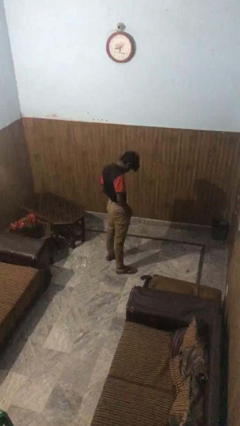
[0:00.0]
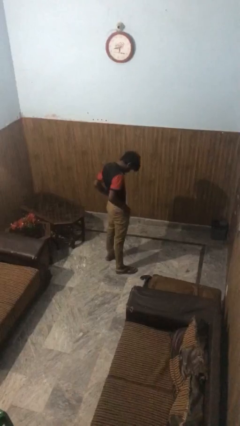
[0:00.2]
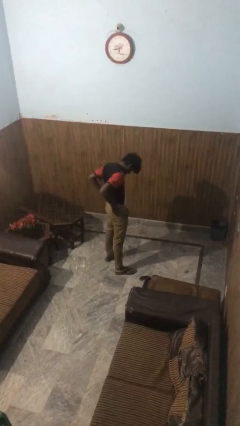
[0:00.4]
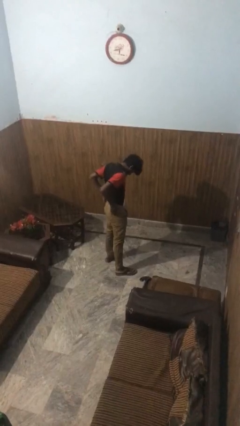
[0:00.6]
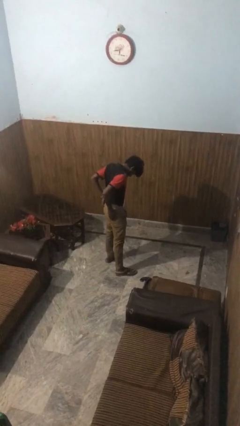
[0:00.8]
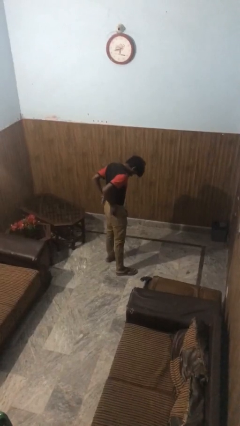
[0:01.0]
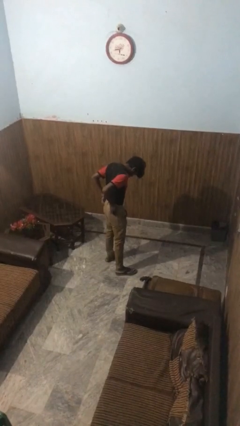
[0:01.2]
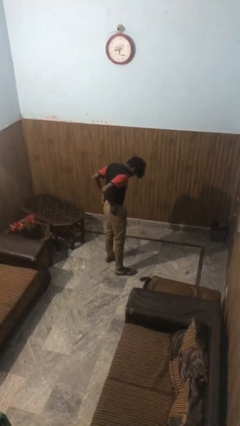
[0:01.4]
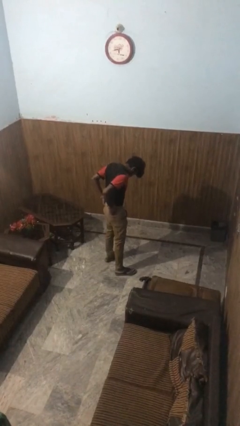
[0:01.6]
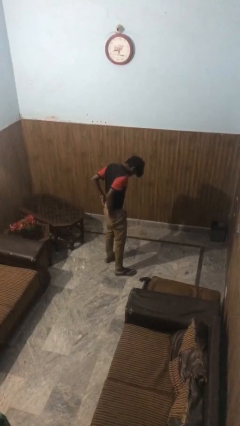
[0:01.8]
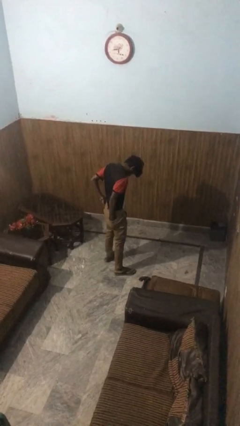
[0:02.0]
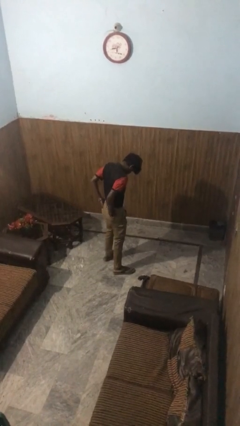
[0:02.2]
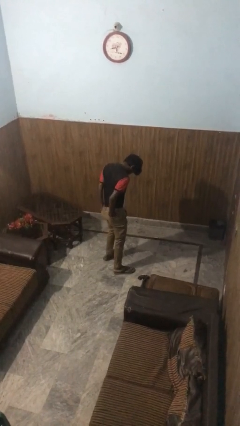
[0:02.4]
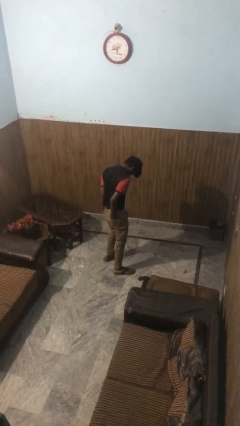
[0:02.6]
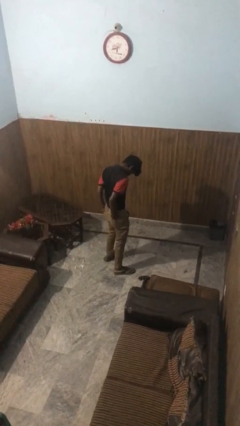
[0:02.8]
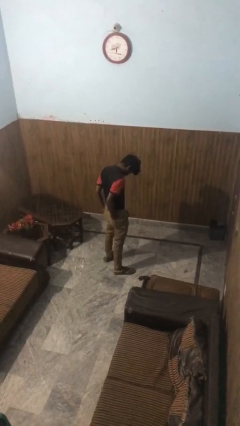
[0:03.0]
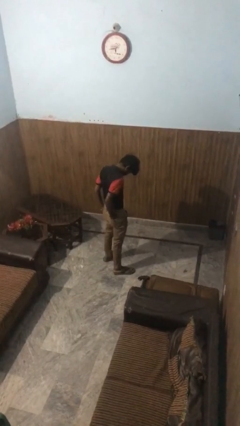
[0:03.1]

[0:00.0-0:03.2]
person puts hands in back pockets

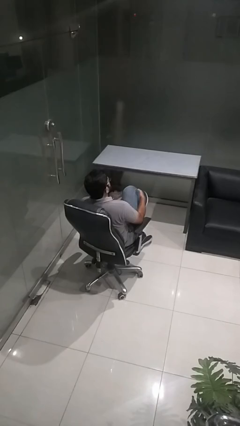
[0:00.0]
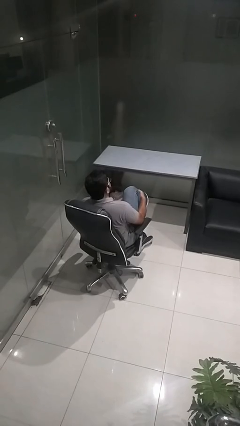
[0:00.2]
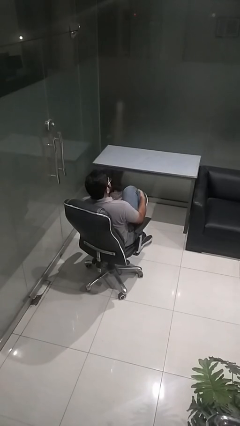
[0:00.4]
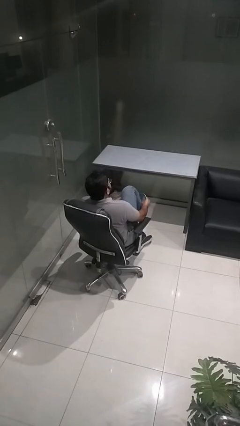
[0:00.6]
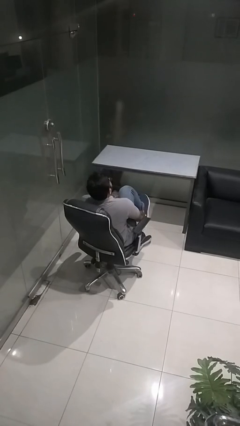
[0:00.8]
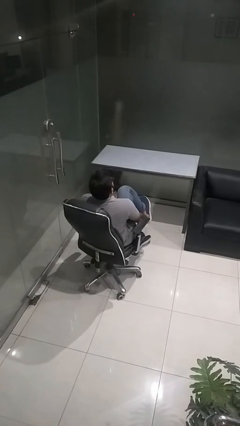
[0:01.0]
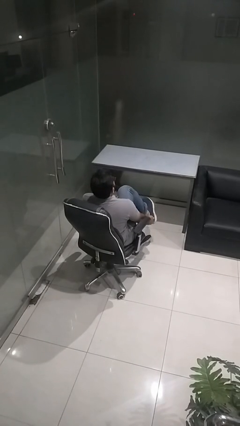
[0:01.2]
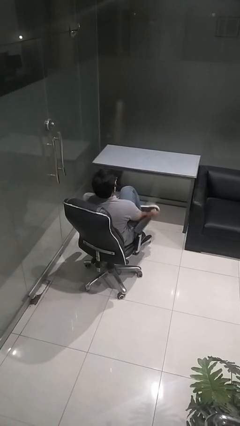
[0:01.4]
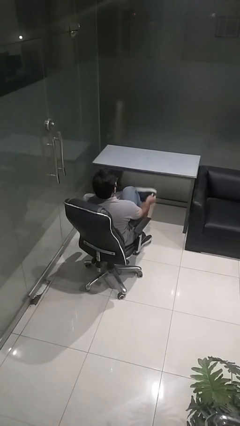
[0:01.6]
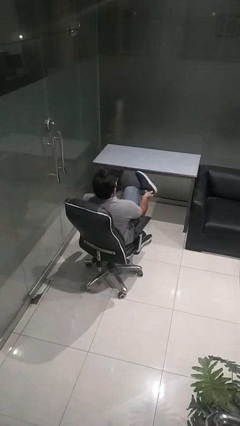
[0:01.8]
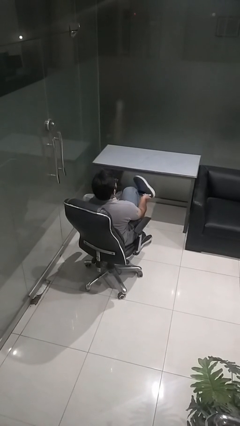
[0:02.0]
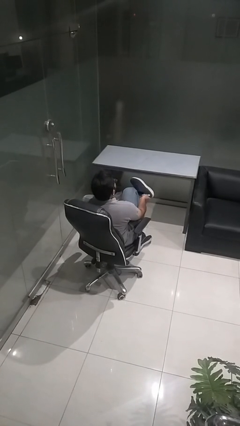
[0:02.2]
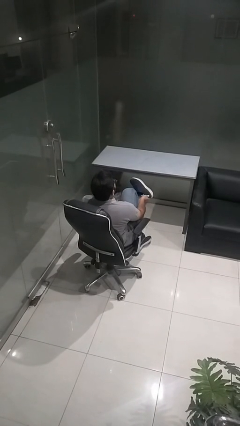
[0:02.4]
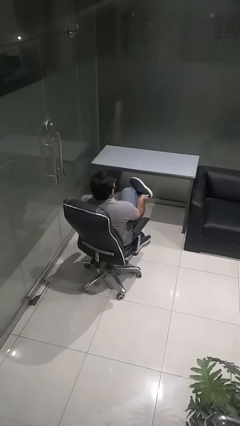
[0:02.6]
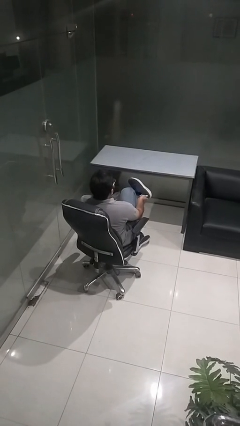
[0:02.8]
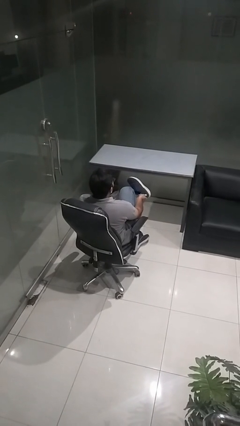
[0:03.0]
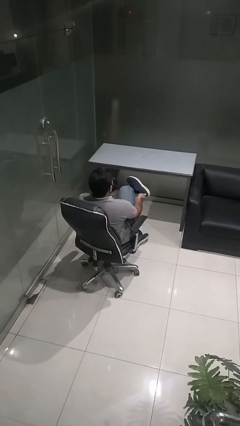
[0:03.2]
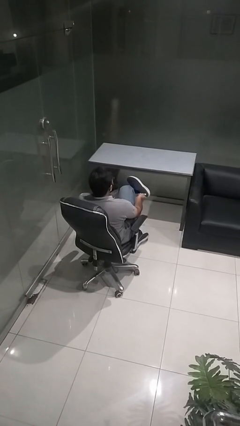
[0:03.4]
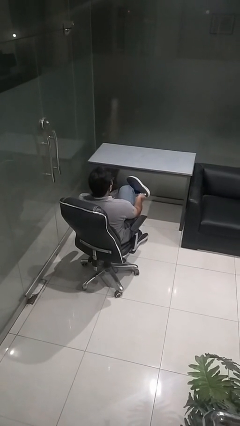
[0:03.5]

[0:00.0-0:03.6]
person takes off shoes

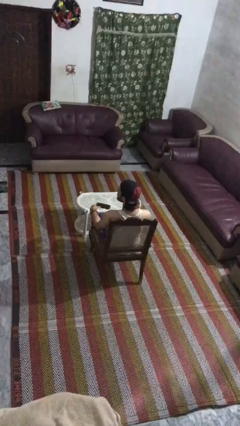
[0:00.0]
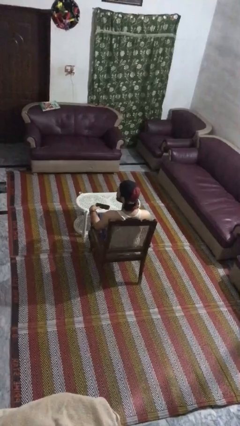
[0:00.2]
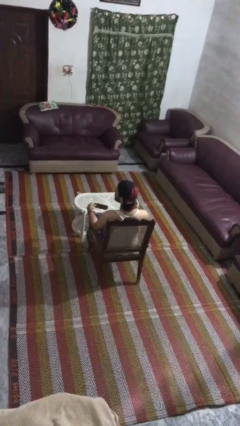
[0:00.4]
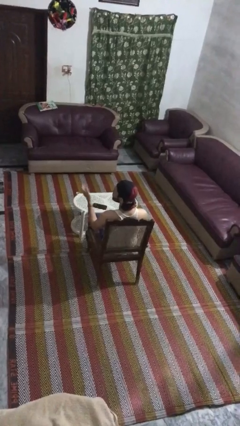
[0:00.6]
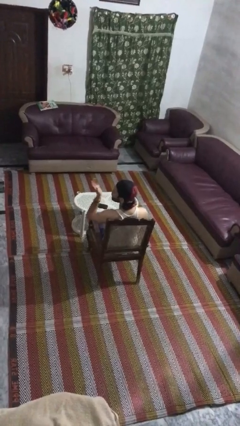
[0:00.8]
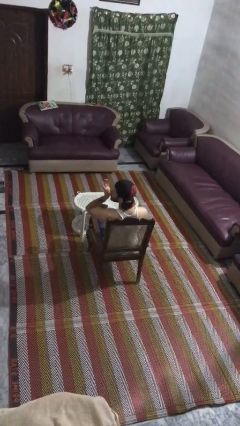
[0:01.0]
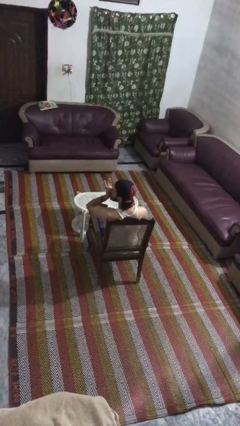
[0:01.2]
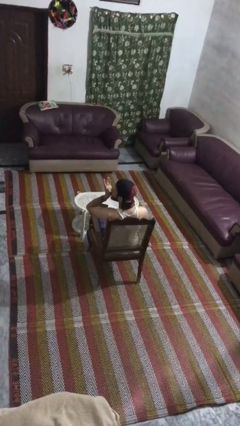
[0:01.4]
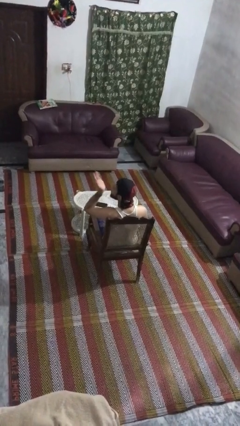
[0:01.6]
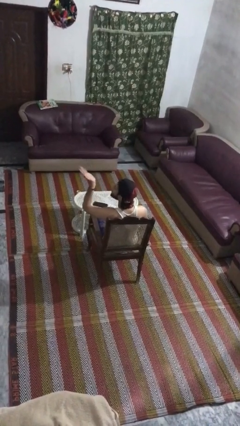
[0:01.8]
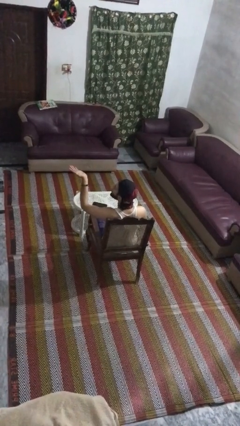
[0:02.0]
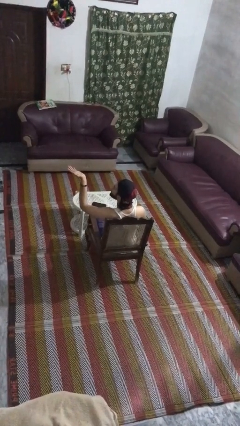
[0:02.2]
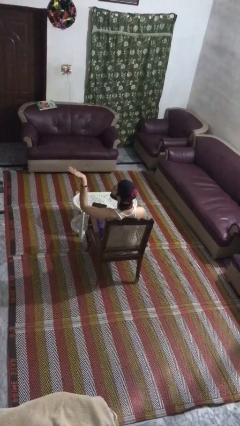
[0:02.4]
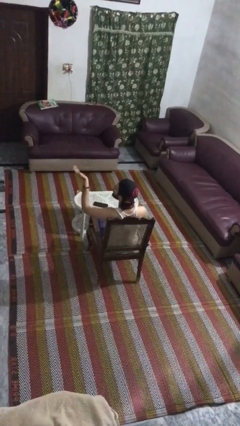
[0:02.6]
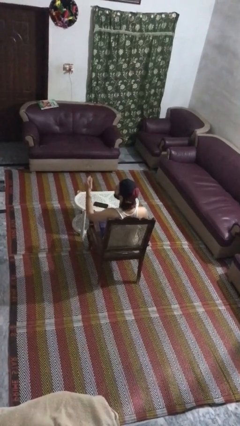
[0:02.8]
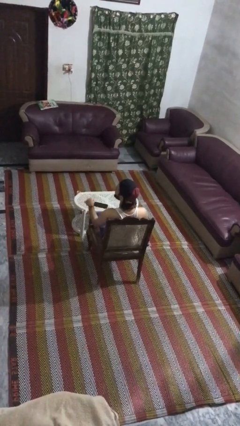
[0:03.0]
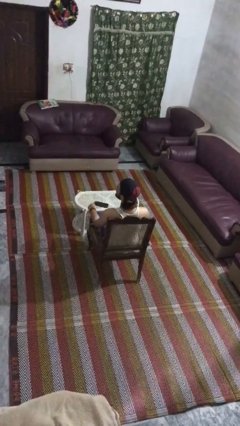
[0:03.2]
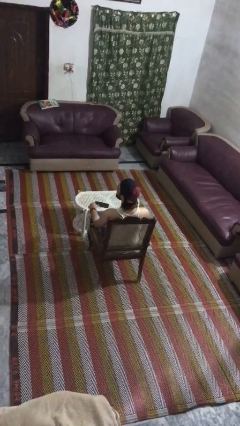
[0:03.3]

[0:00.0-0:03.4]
person gestures blow kiss

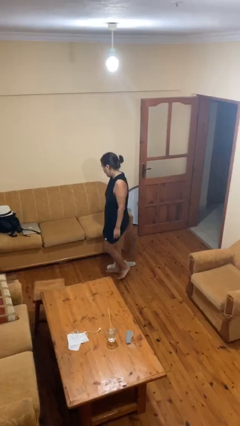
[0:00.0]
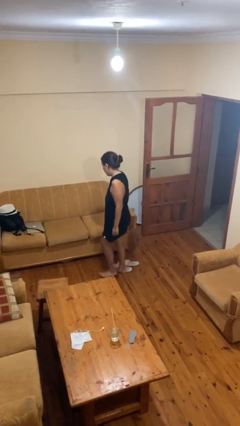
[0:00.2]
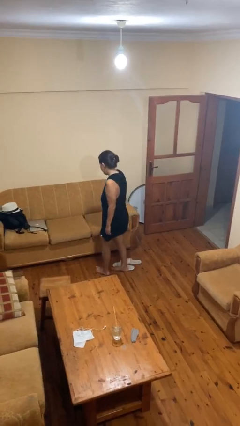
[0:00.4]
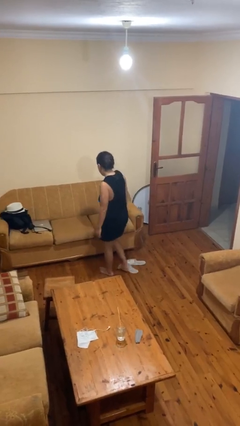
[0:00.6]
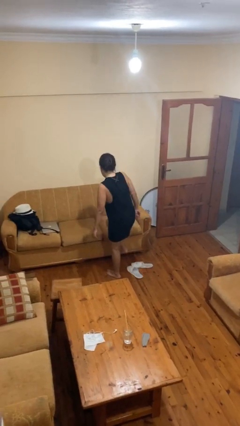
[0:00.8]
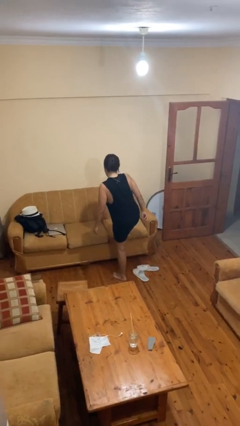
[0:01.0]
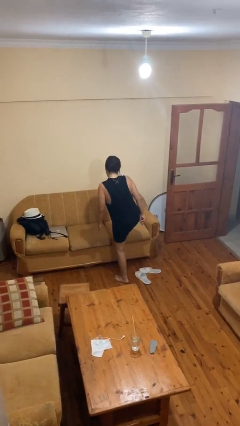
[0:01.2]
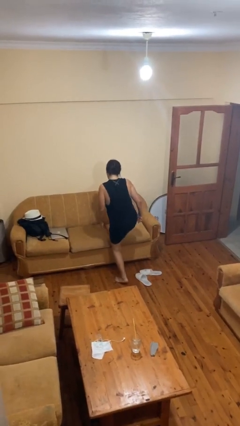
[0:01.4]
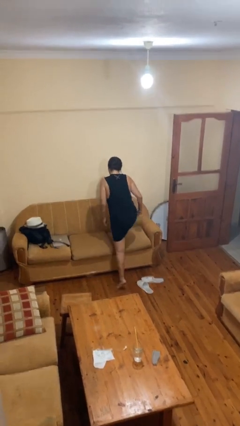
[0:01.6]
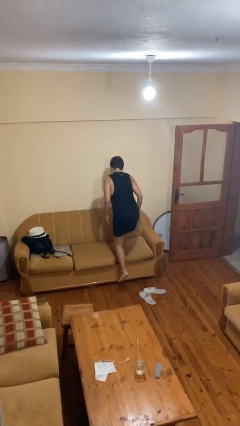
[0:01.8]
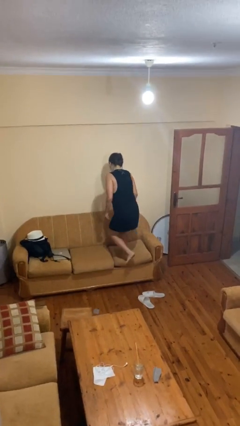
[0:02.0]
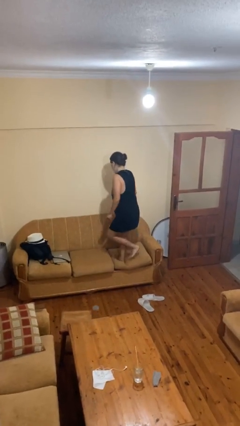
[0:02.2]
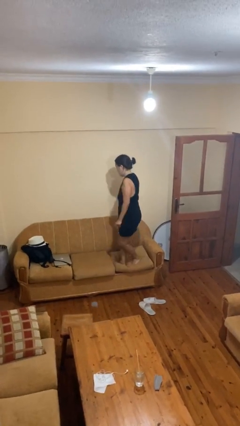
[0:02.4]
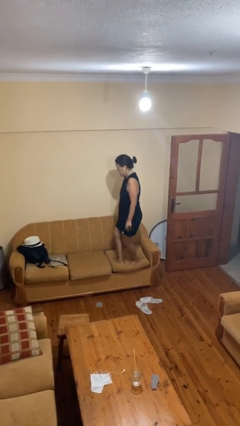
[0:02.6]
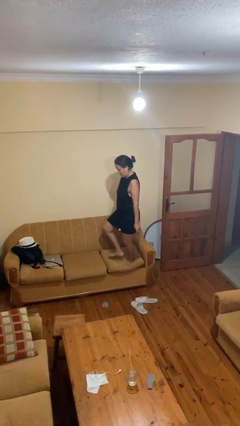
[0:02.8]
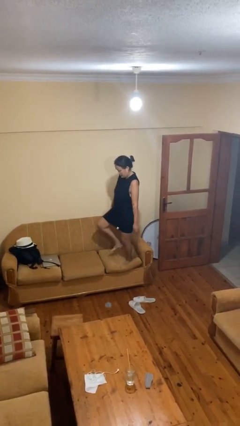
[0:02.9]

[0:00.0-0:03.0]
person climbs on couch

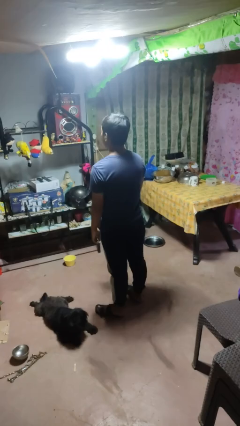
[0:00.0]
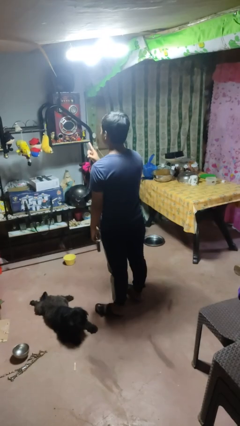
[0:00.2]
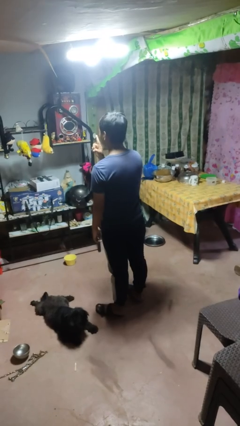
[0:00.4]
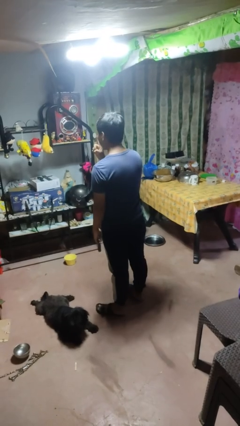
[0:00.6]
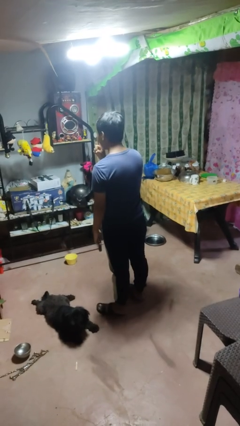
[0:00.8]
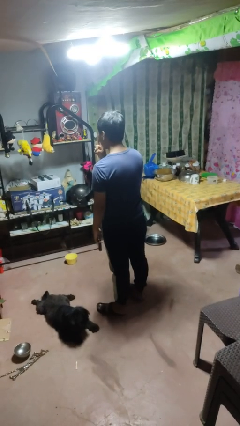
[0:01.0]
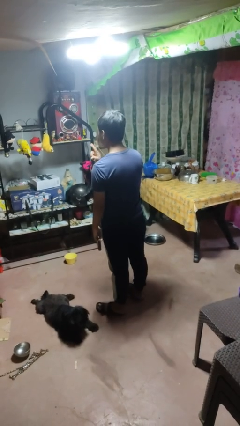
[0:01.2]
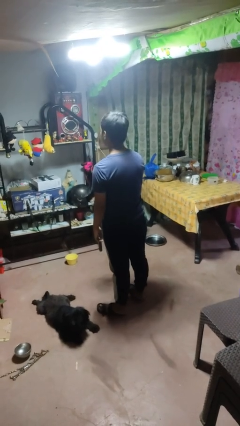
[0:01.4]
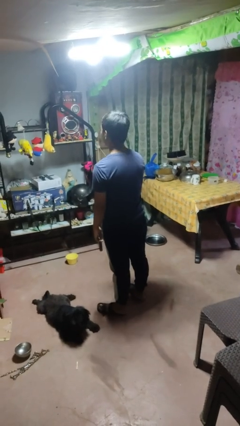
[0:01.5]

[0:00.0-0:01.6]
person gestures be quiet

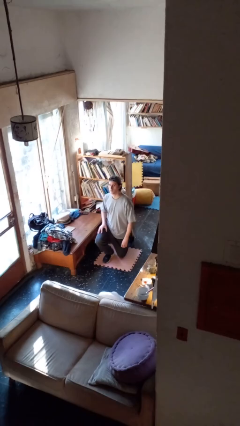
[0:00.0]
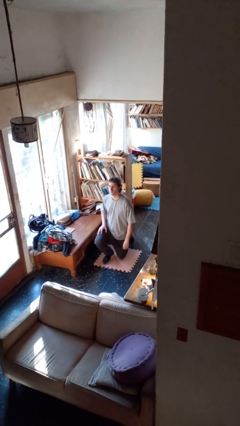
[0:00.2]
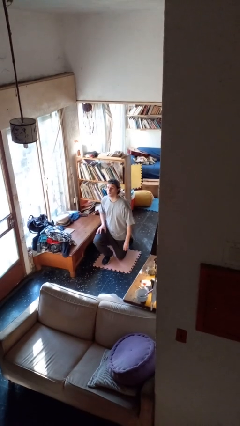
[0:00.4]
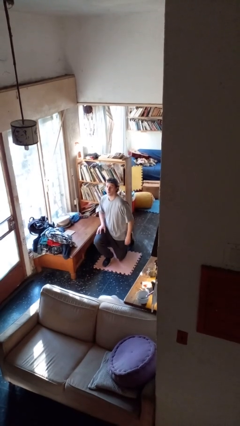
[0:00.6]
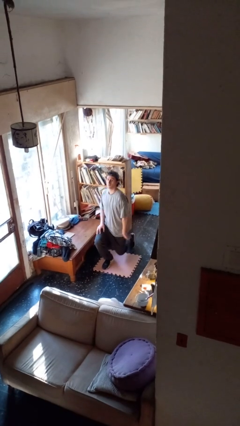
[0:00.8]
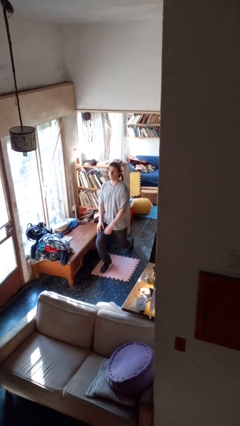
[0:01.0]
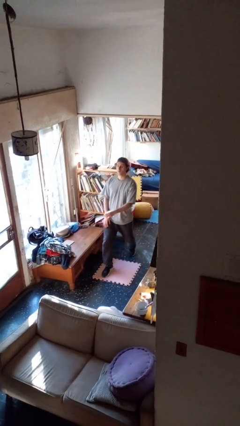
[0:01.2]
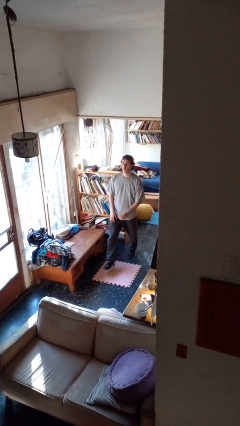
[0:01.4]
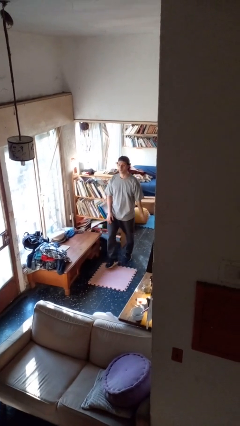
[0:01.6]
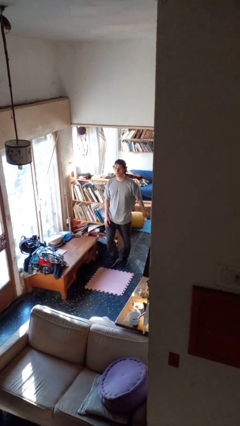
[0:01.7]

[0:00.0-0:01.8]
person stands up from floor

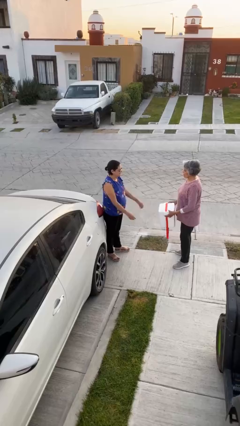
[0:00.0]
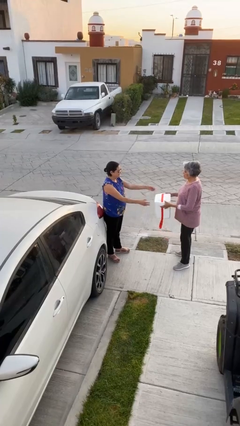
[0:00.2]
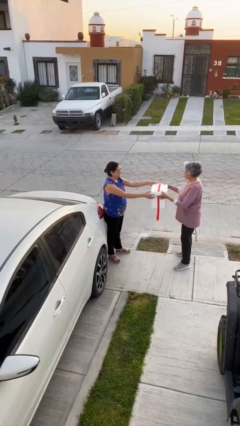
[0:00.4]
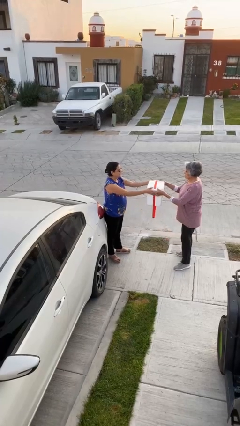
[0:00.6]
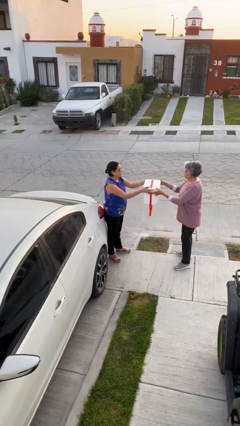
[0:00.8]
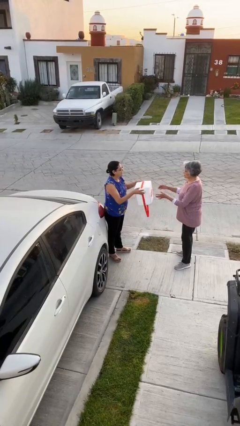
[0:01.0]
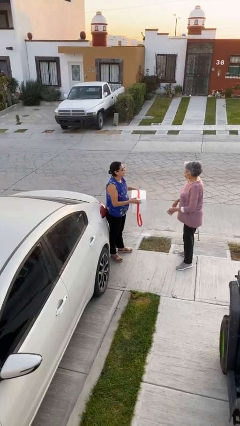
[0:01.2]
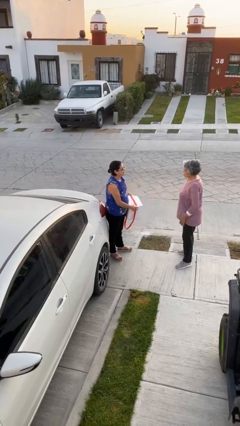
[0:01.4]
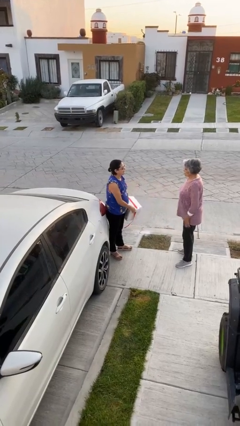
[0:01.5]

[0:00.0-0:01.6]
person transfers object to person
